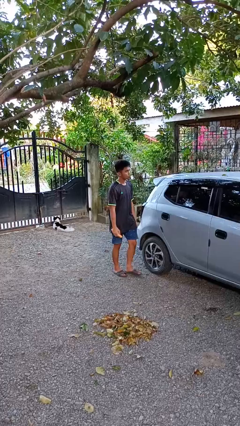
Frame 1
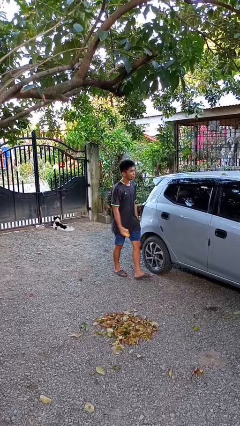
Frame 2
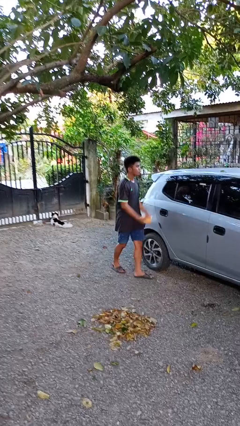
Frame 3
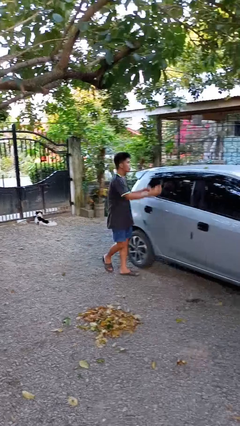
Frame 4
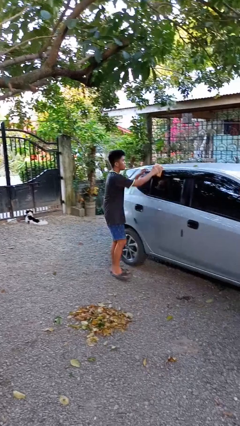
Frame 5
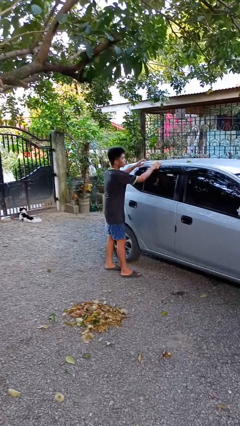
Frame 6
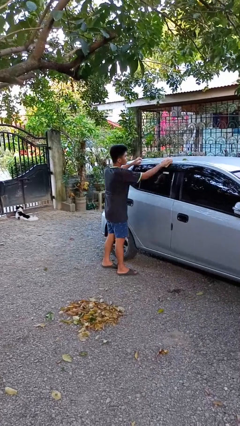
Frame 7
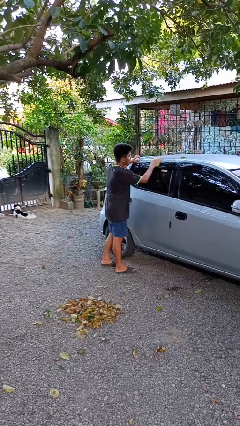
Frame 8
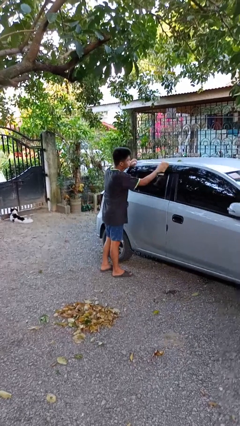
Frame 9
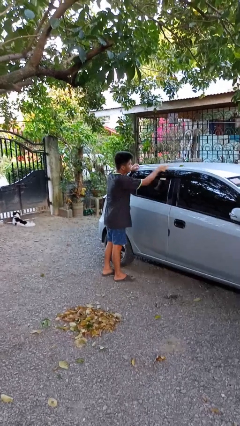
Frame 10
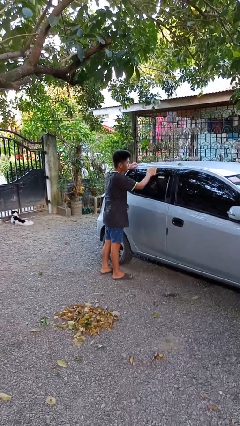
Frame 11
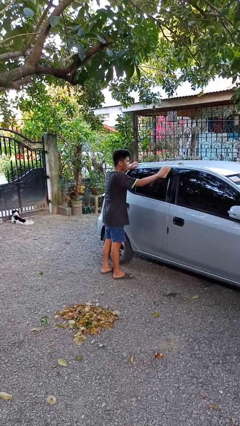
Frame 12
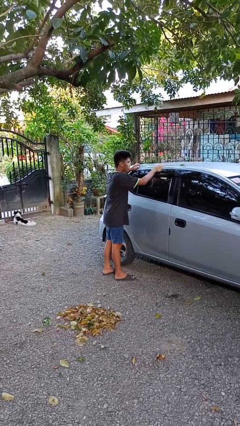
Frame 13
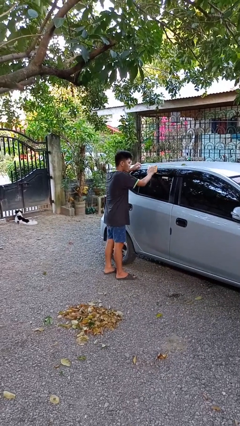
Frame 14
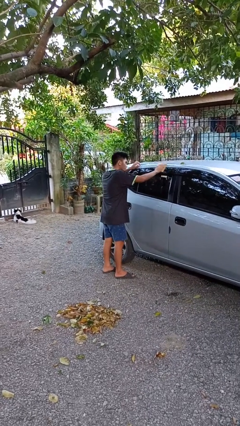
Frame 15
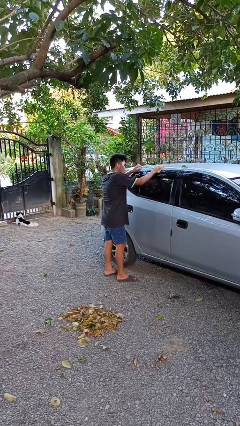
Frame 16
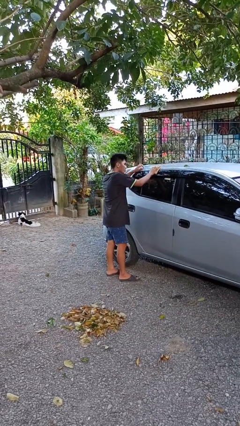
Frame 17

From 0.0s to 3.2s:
person polishes car with rag

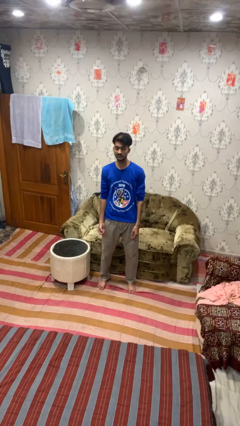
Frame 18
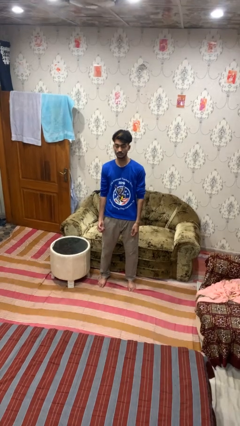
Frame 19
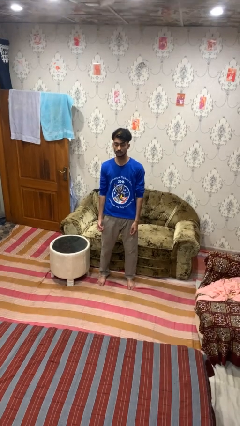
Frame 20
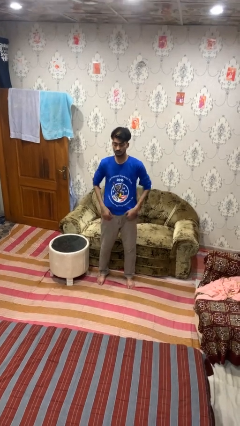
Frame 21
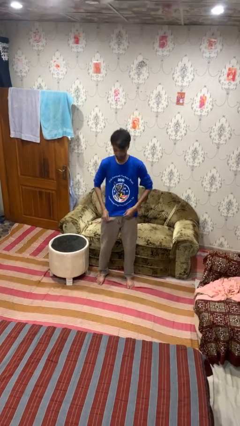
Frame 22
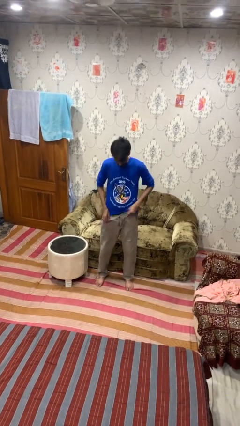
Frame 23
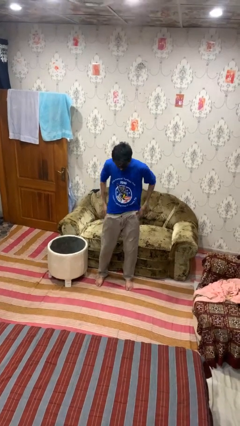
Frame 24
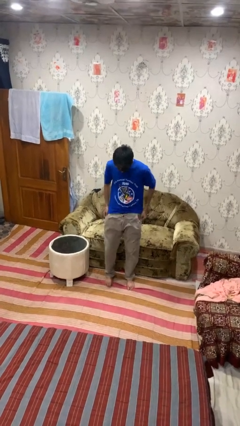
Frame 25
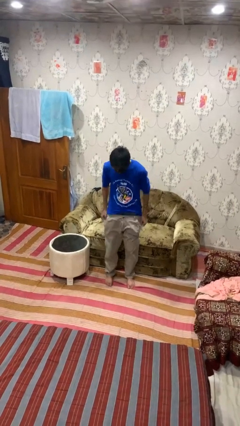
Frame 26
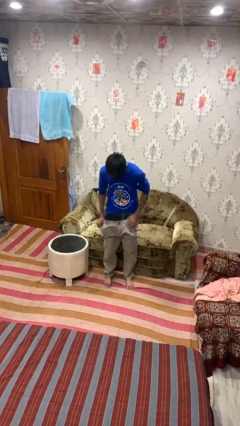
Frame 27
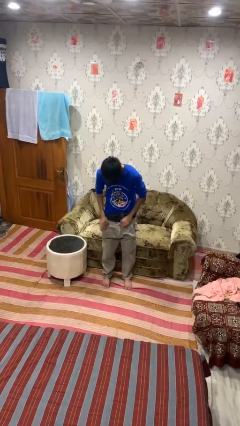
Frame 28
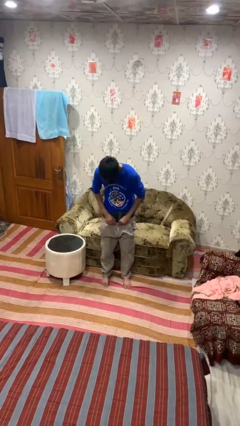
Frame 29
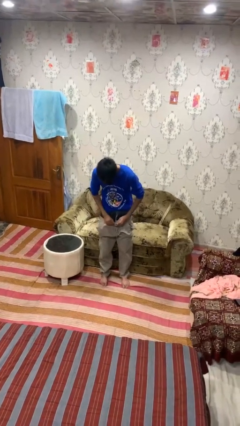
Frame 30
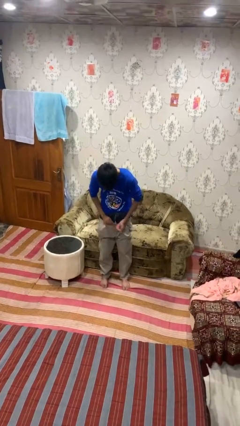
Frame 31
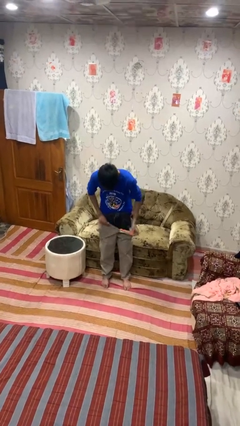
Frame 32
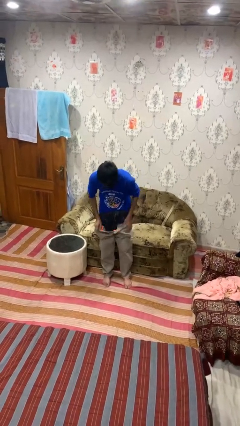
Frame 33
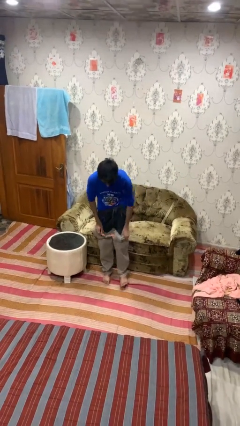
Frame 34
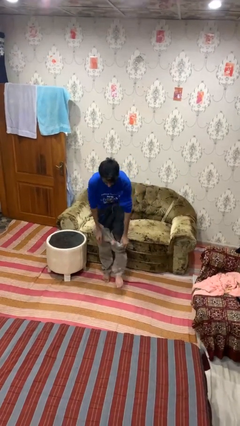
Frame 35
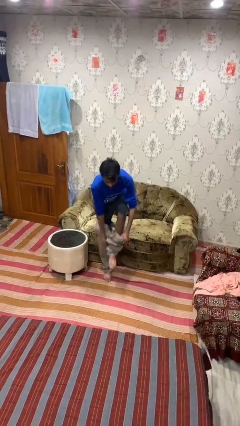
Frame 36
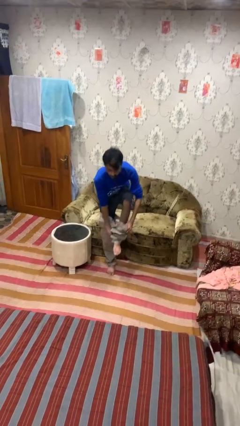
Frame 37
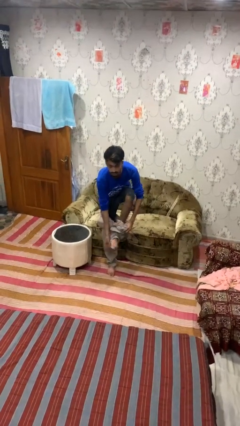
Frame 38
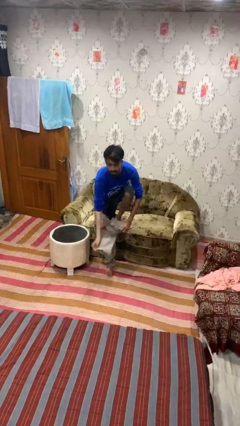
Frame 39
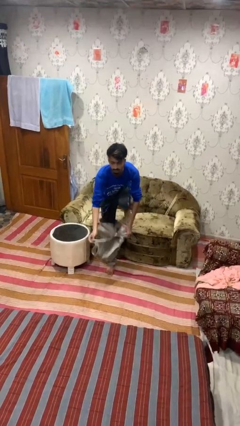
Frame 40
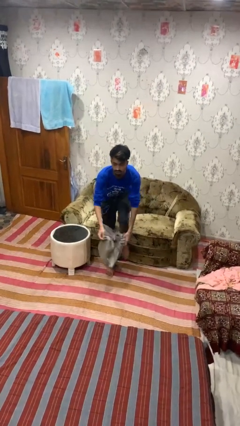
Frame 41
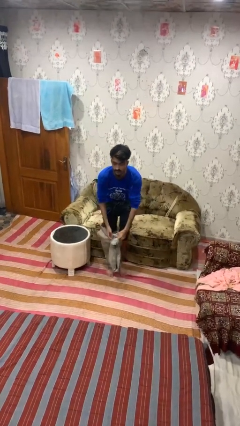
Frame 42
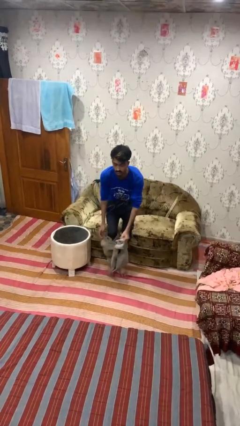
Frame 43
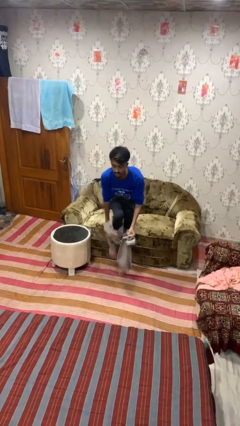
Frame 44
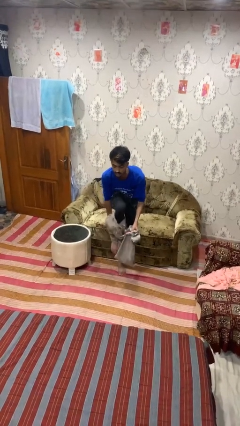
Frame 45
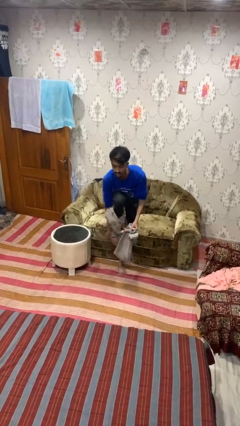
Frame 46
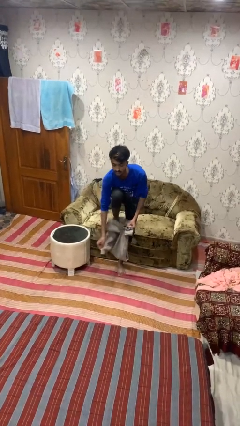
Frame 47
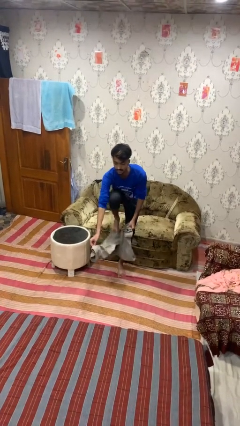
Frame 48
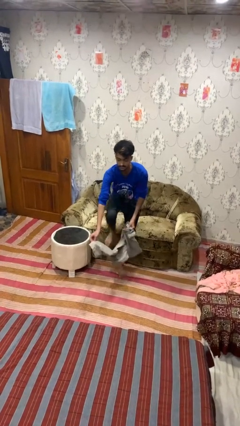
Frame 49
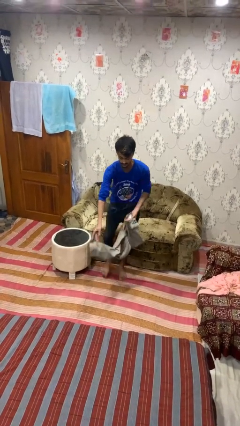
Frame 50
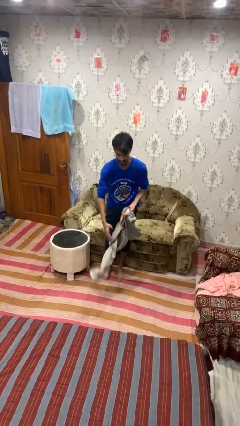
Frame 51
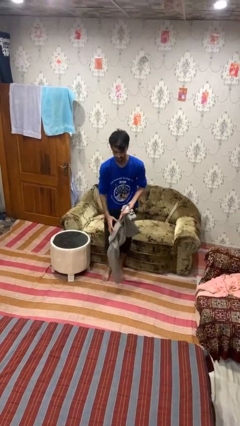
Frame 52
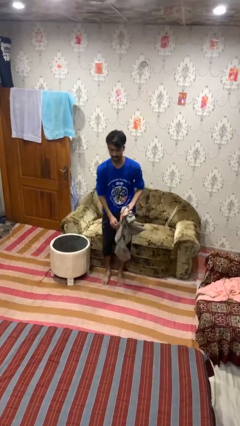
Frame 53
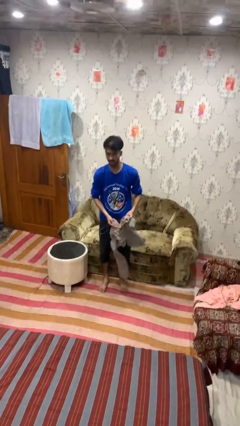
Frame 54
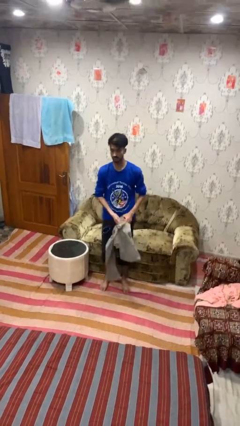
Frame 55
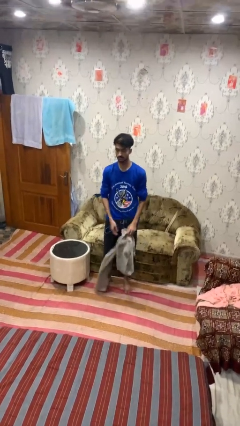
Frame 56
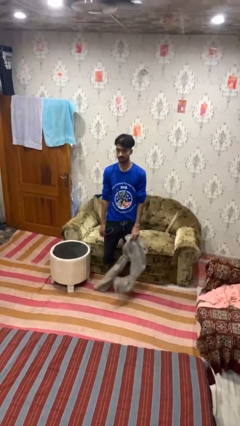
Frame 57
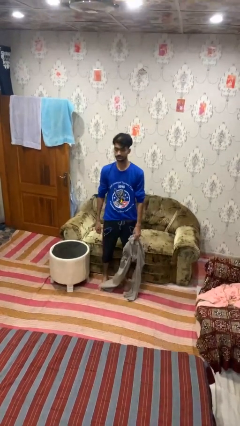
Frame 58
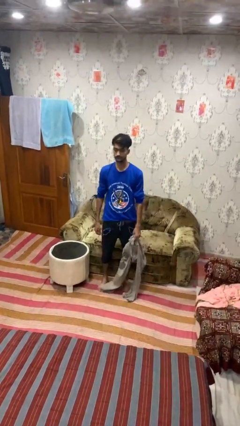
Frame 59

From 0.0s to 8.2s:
person takes off pants

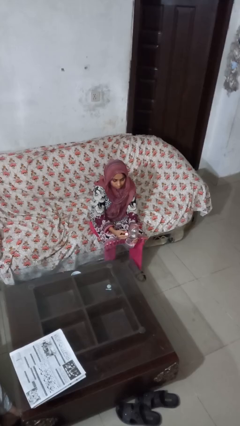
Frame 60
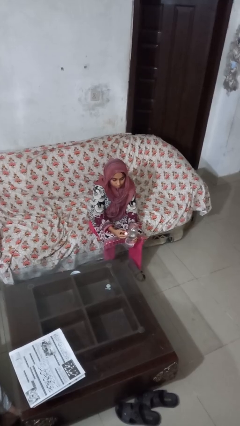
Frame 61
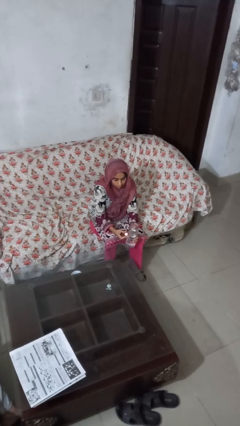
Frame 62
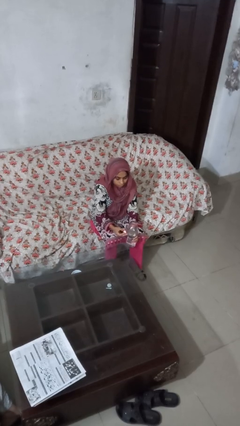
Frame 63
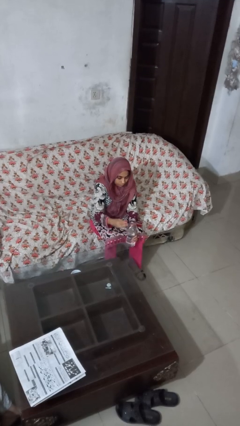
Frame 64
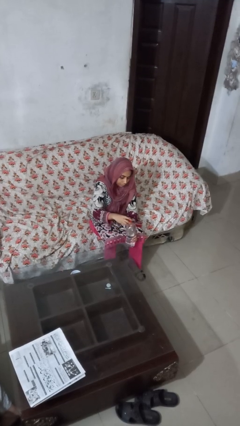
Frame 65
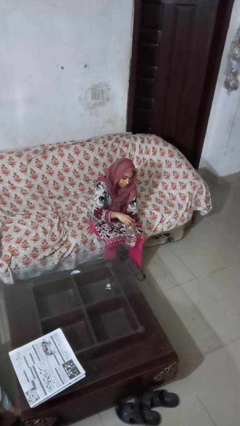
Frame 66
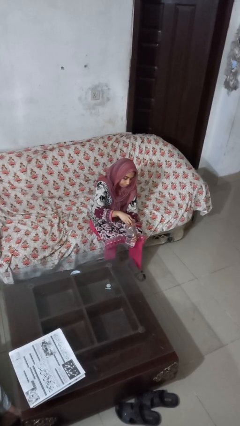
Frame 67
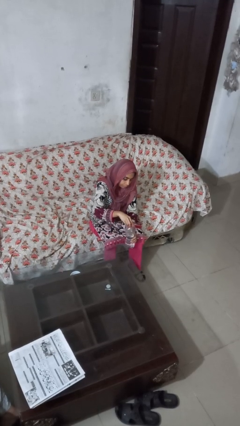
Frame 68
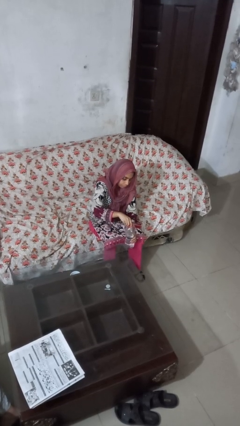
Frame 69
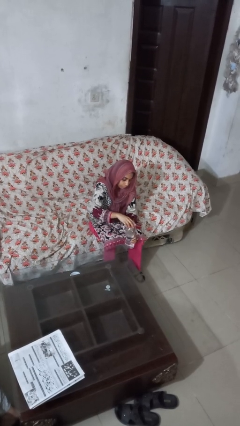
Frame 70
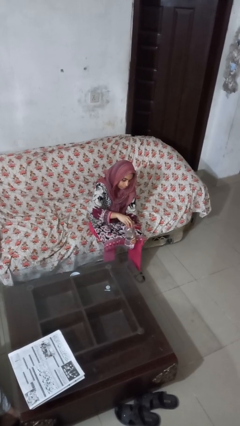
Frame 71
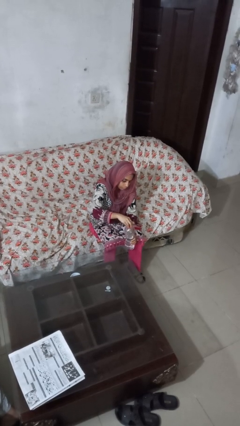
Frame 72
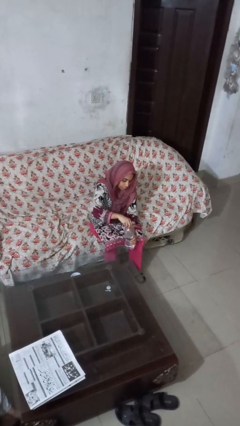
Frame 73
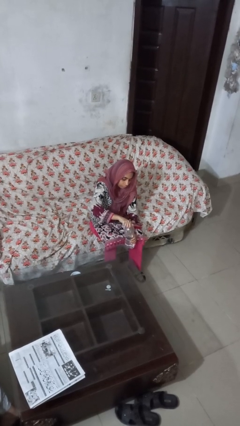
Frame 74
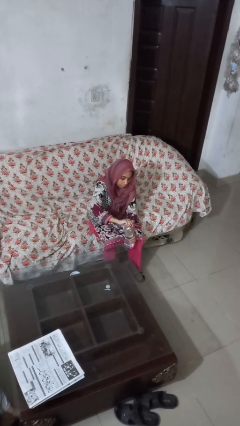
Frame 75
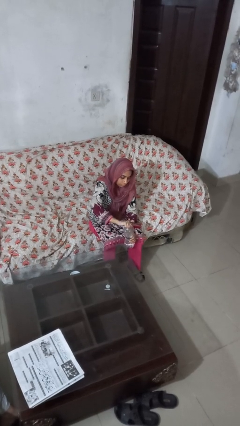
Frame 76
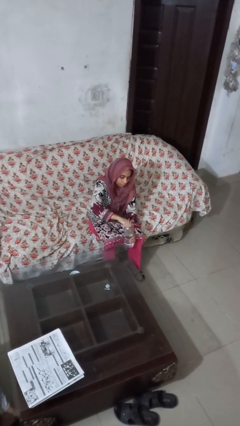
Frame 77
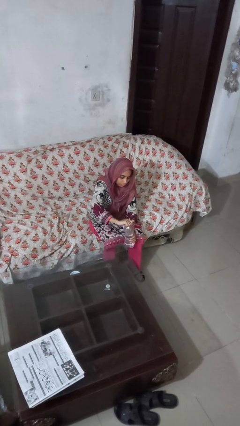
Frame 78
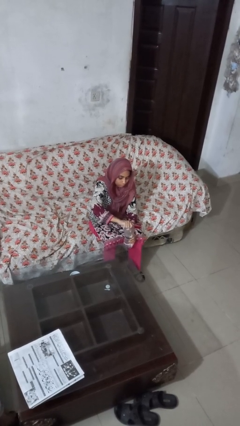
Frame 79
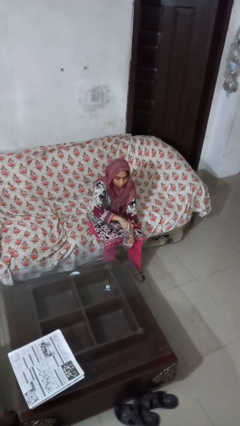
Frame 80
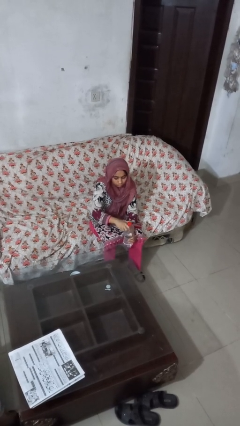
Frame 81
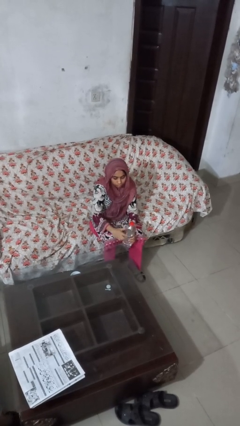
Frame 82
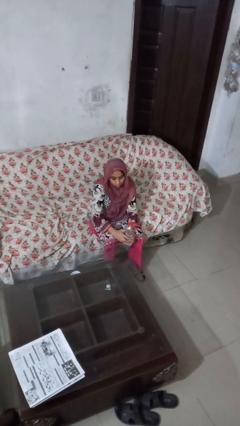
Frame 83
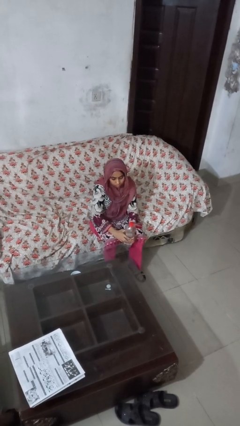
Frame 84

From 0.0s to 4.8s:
person screws lid to bottle

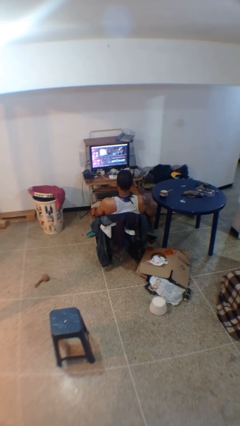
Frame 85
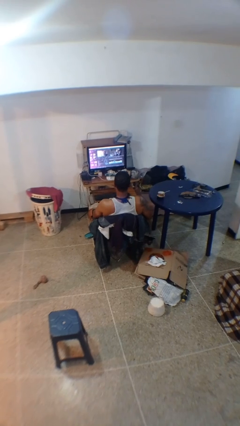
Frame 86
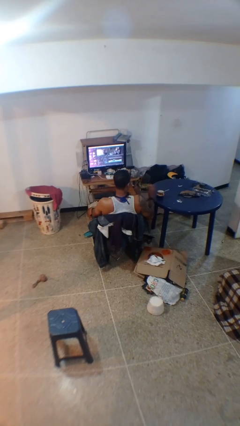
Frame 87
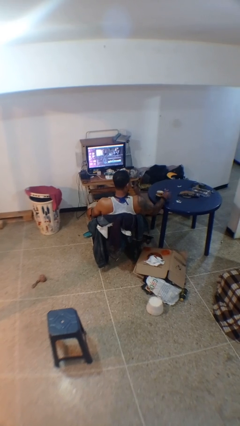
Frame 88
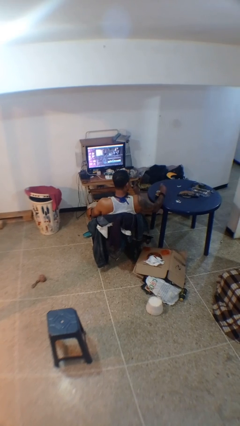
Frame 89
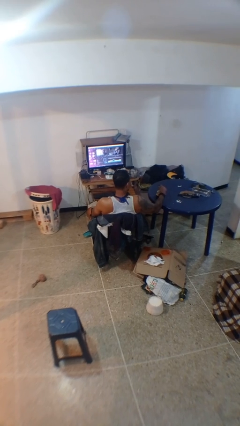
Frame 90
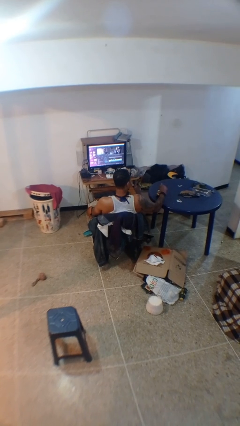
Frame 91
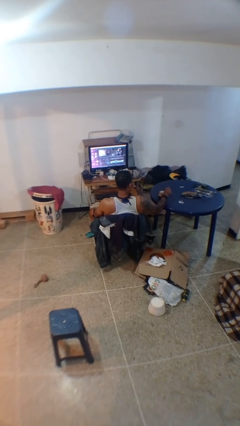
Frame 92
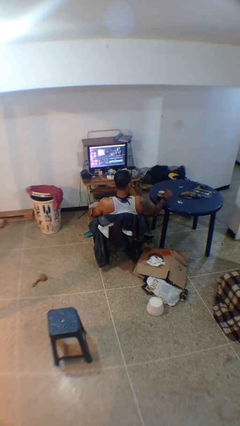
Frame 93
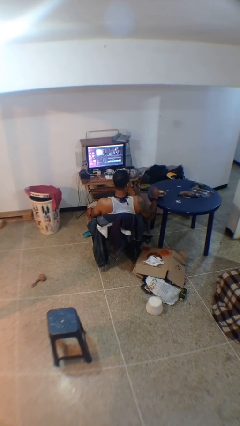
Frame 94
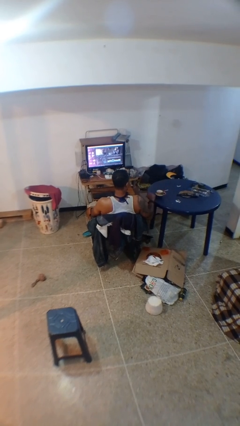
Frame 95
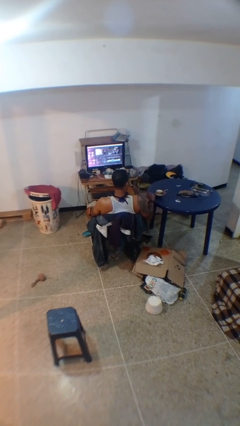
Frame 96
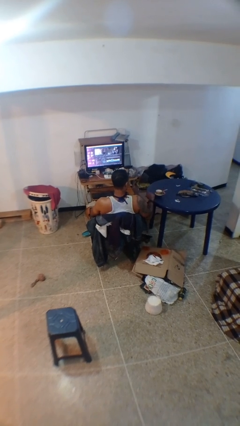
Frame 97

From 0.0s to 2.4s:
person stirs mug
